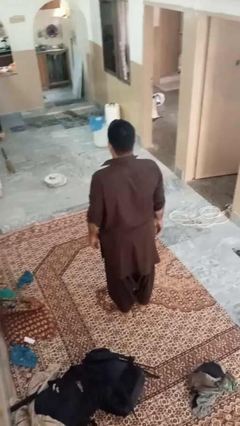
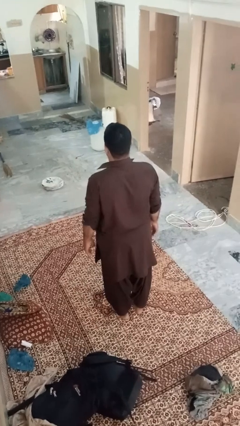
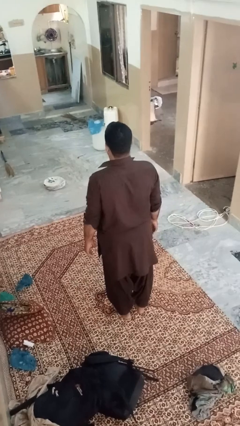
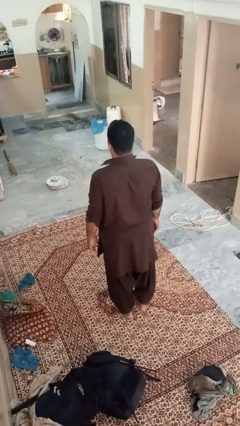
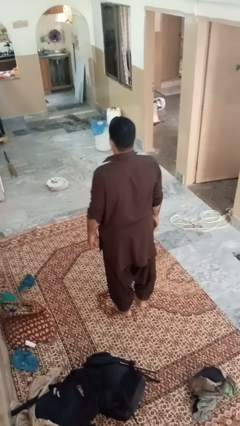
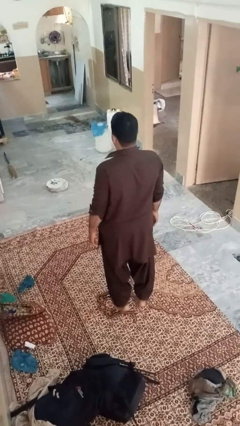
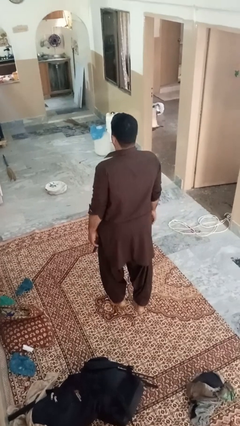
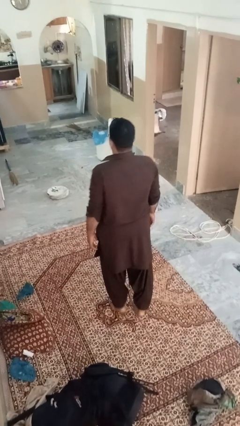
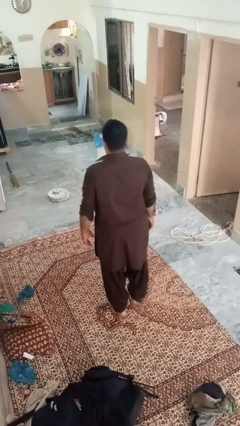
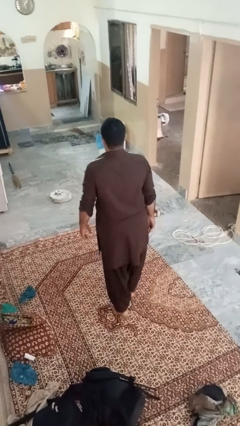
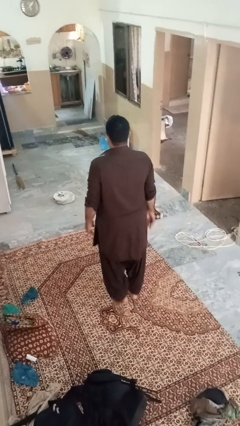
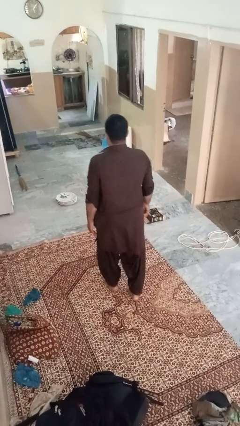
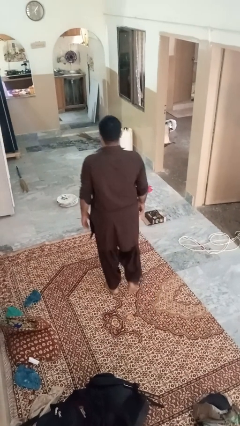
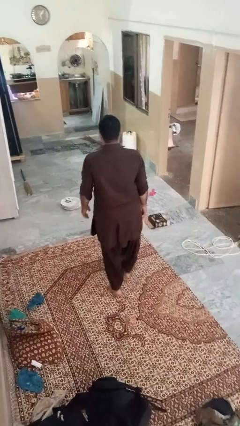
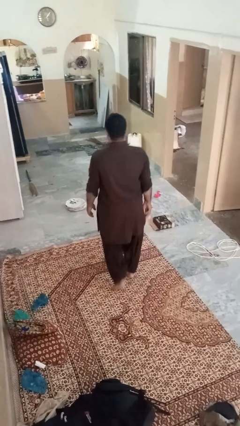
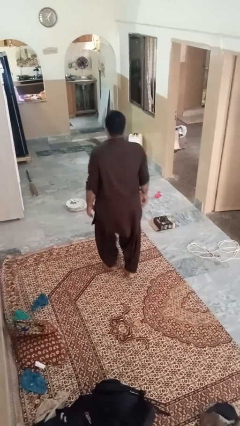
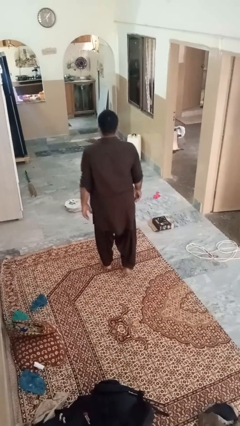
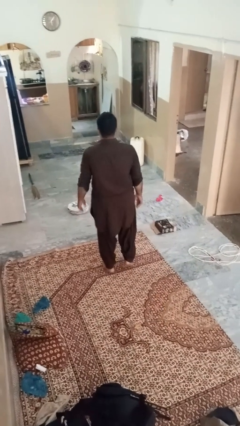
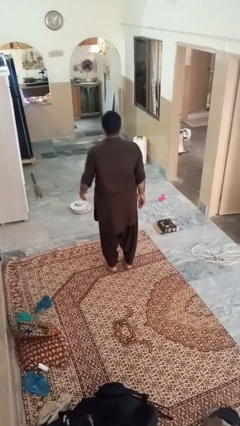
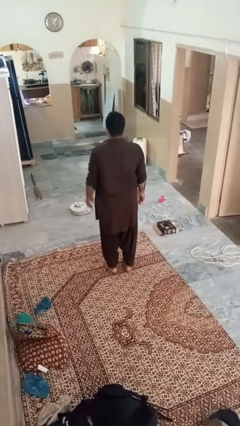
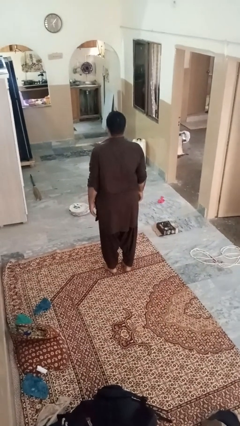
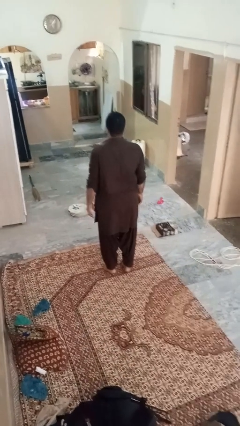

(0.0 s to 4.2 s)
person walks tiptoe

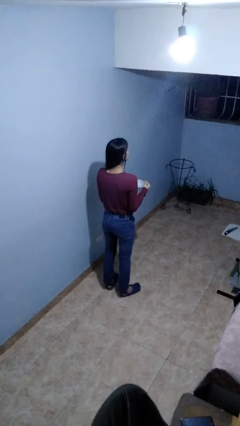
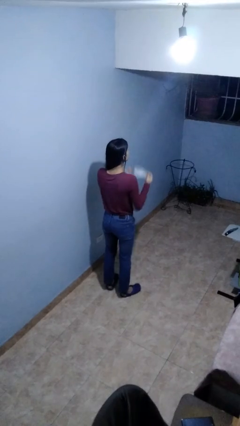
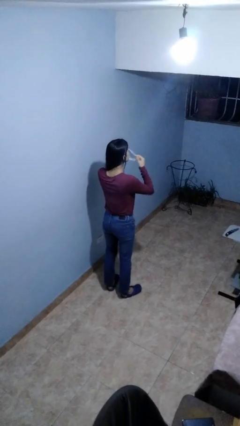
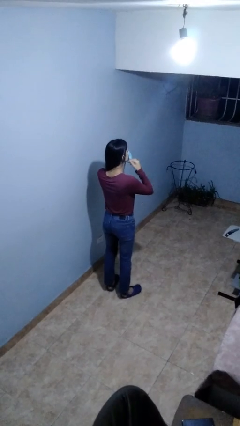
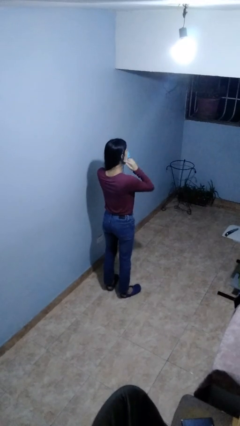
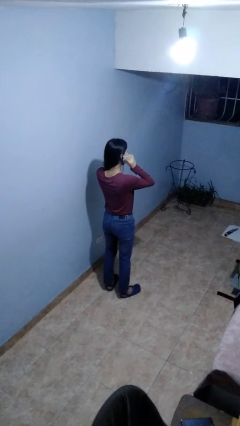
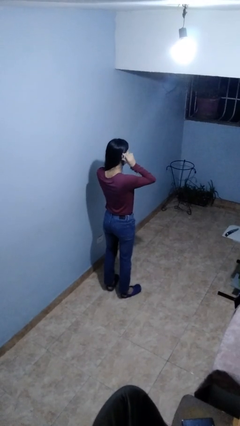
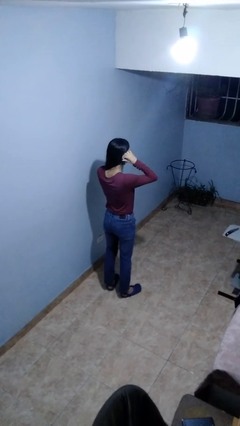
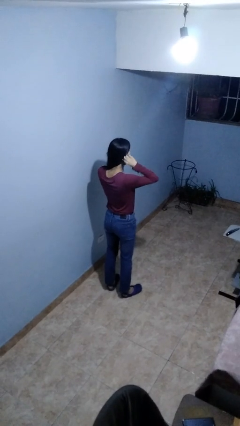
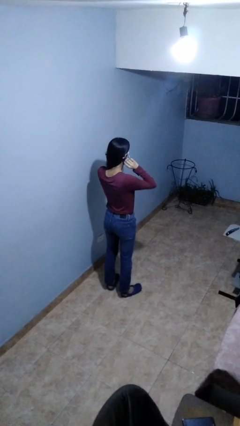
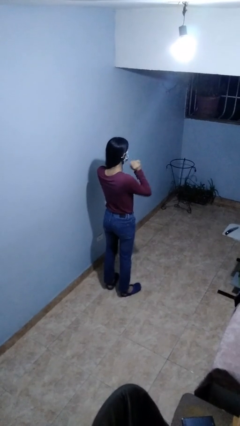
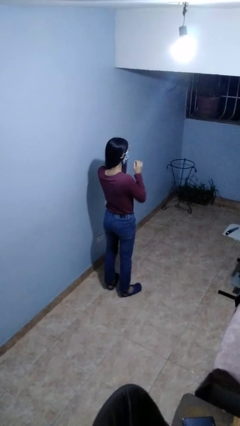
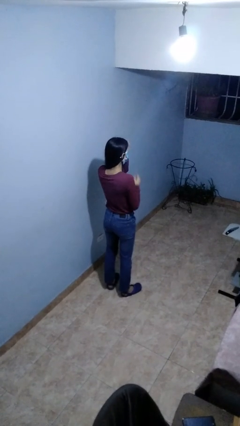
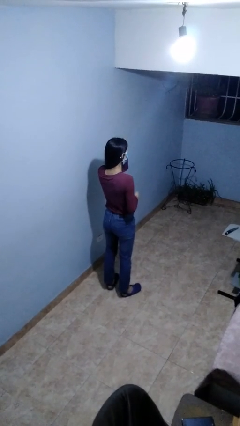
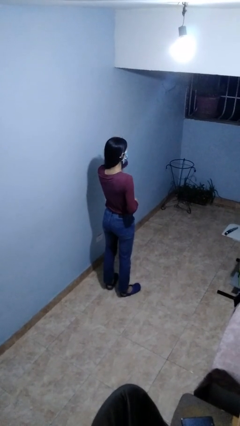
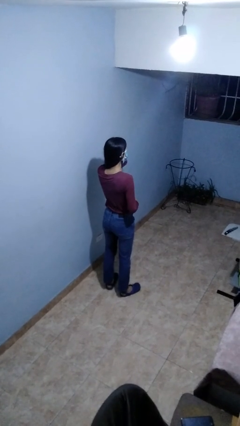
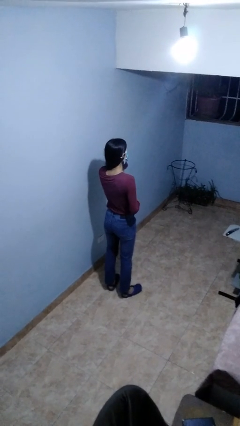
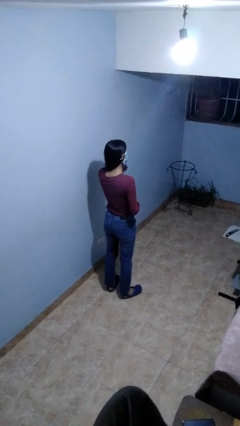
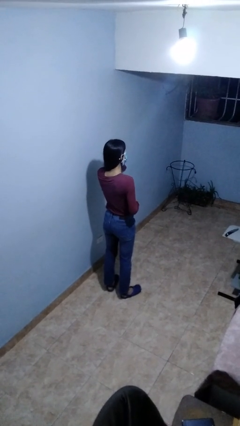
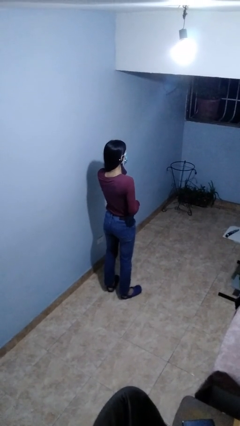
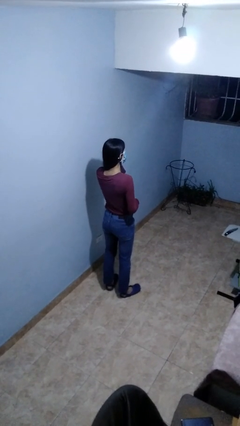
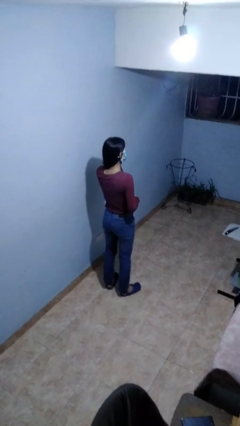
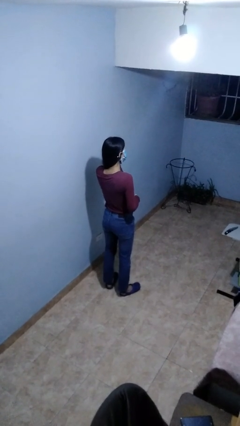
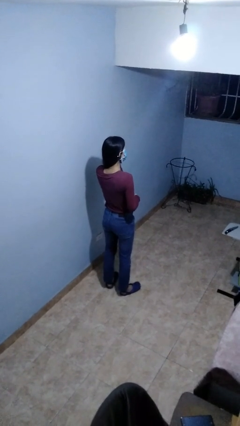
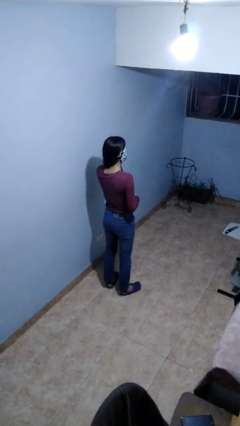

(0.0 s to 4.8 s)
person puts on facemask

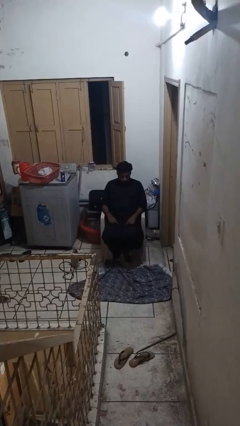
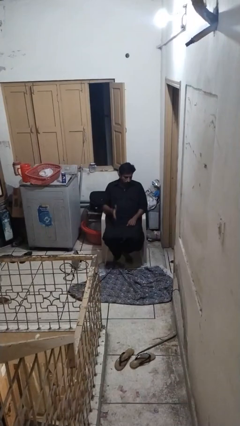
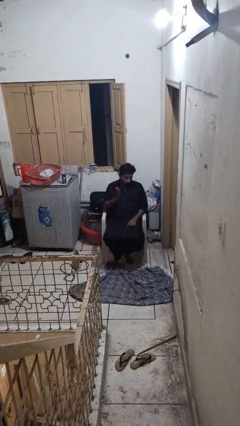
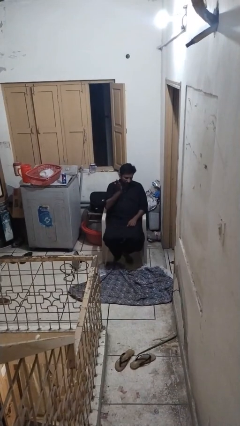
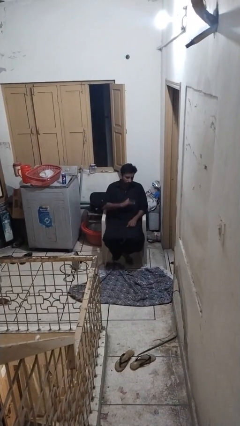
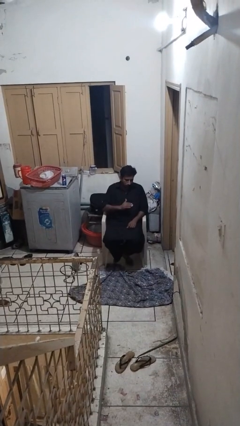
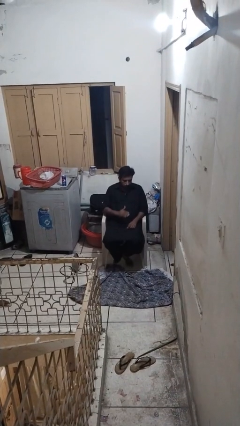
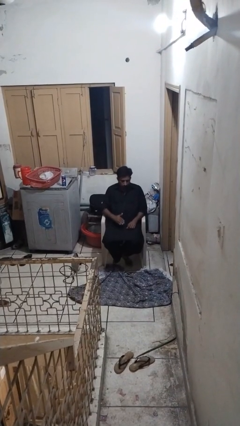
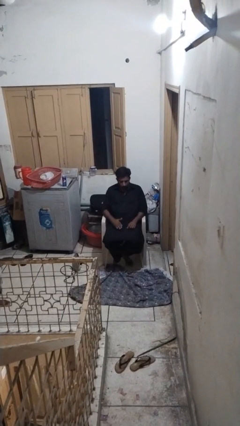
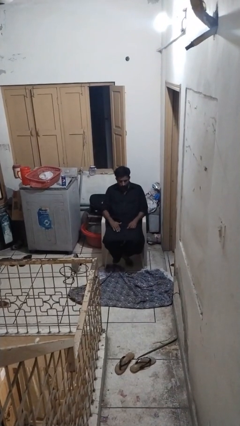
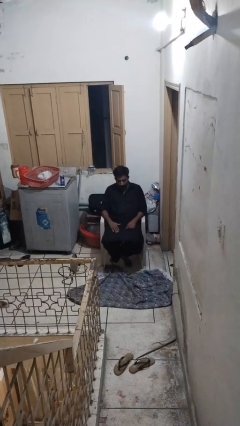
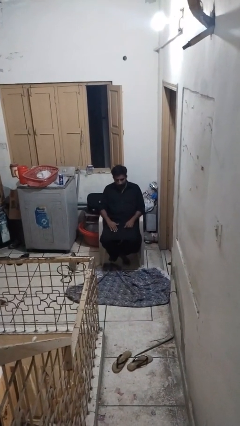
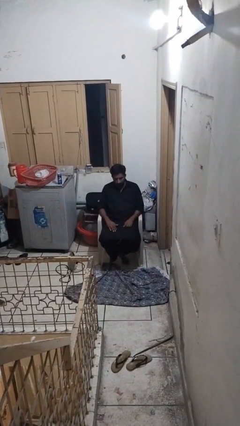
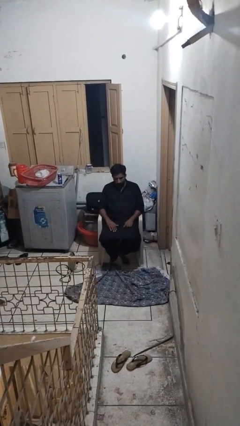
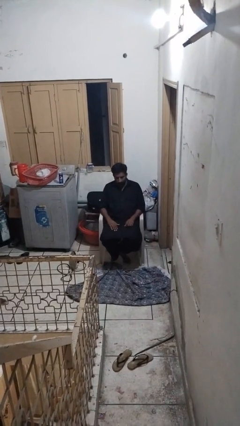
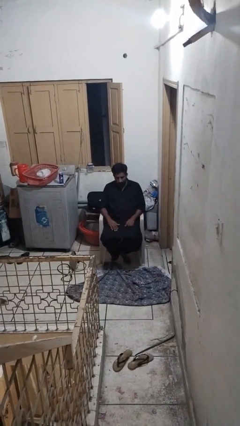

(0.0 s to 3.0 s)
person swats bug

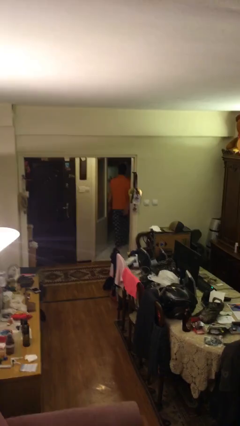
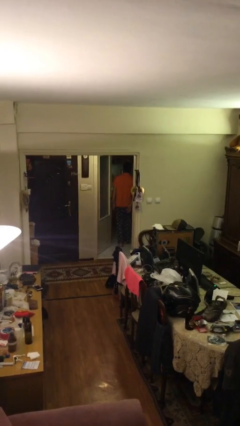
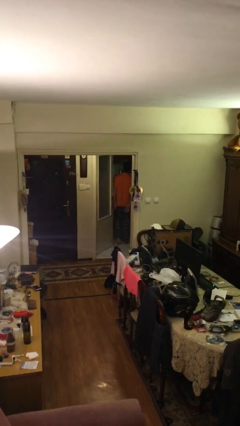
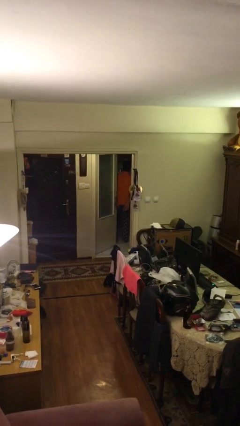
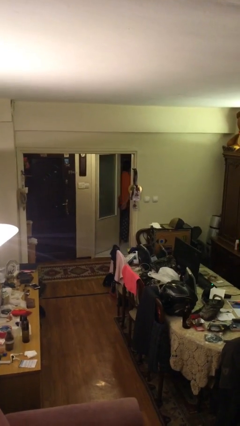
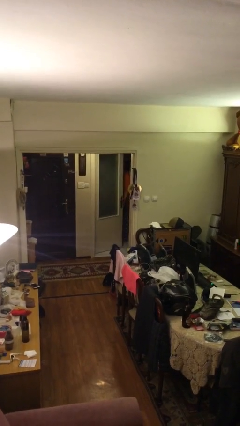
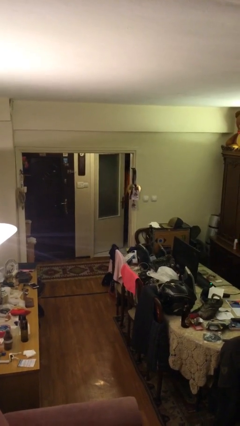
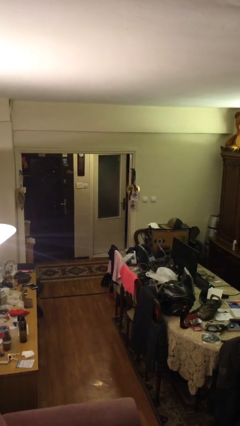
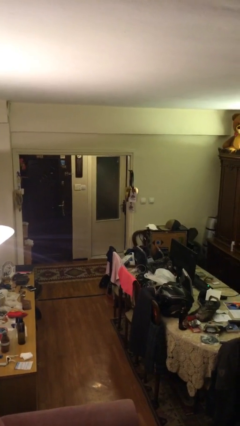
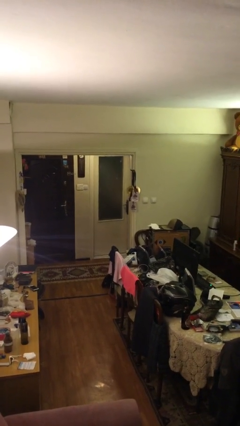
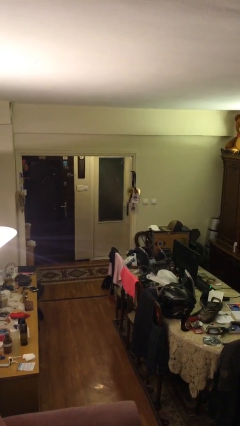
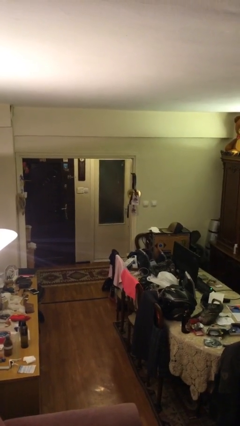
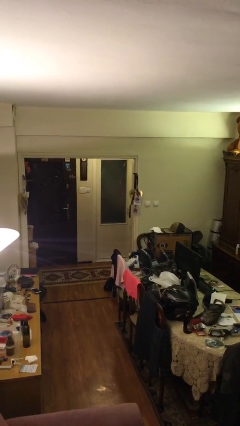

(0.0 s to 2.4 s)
person closes facility door

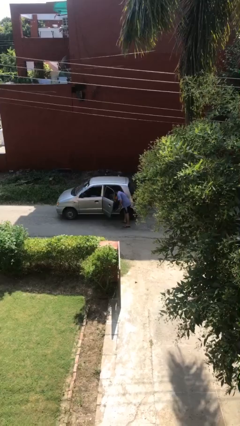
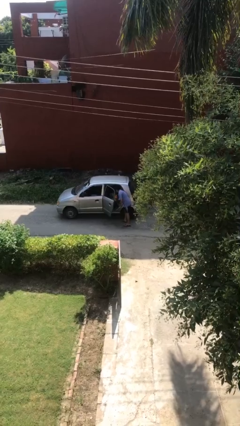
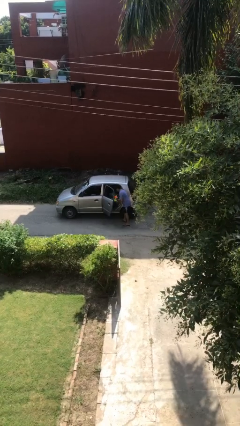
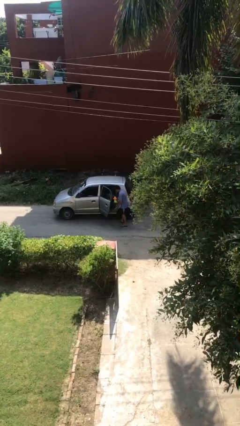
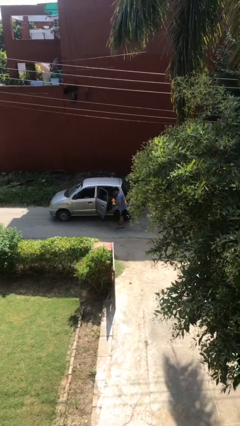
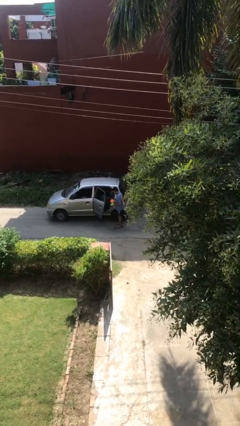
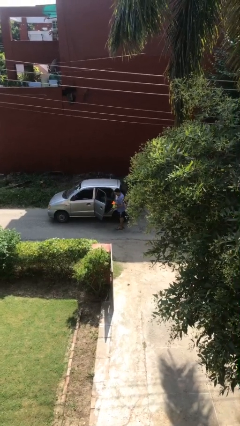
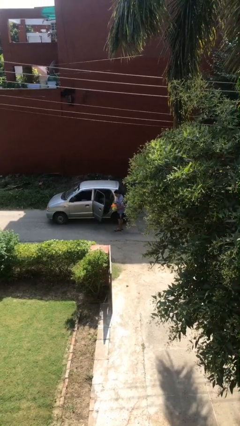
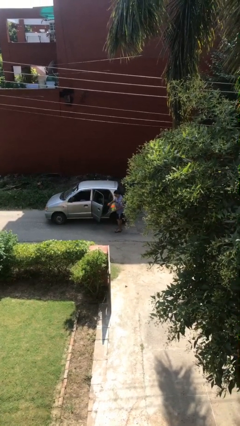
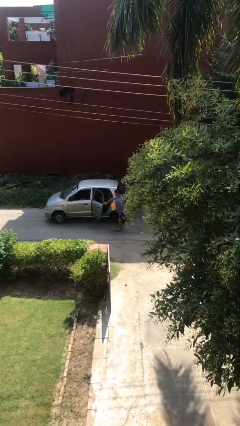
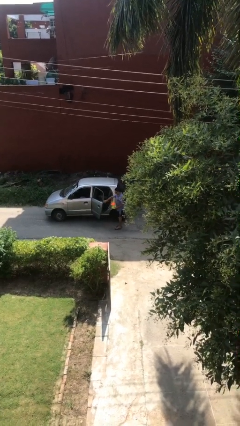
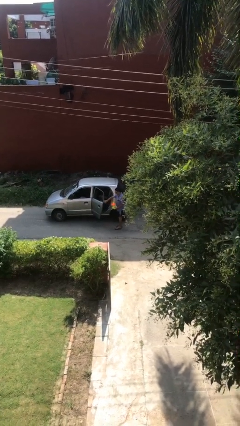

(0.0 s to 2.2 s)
person unloads car

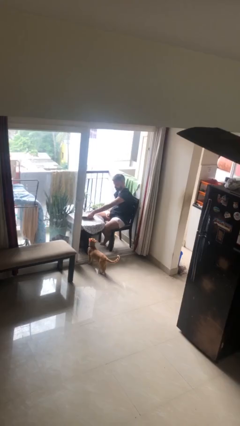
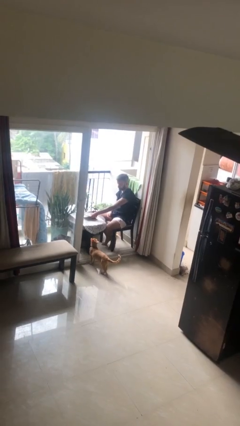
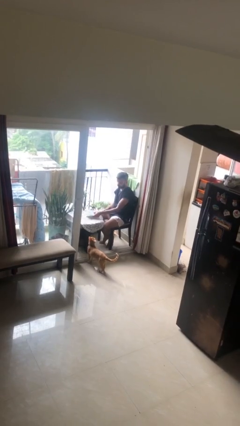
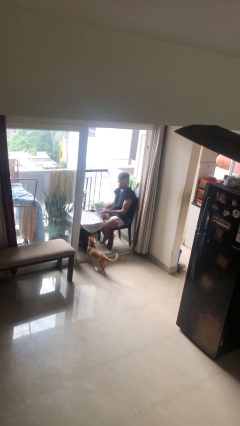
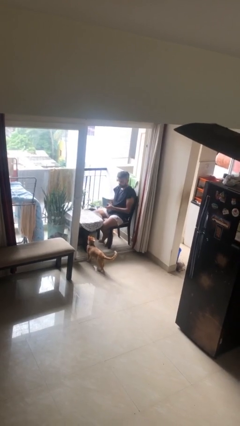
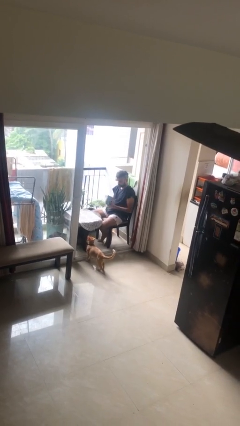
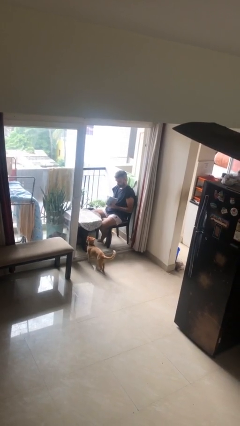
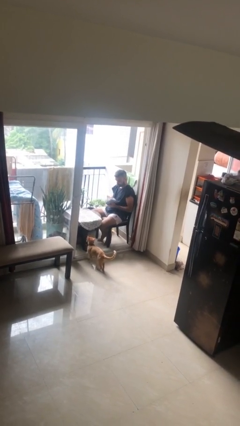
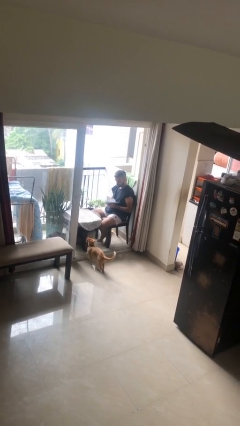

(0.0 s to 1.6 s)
person picks up object from table
